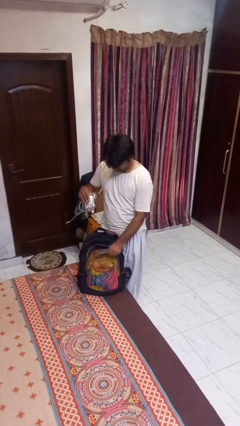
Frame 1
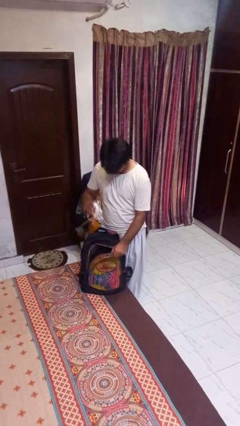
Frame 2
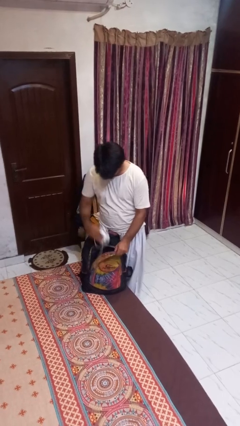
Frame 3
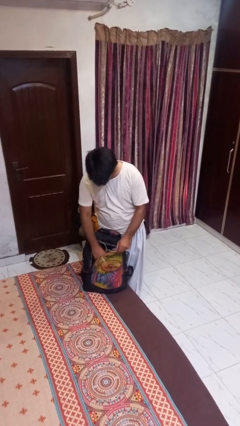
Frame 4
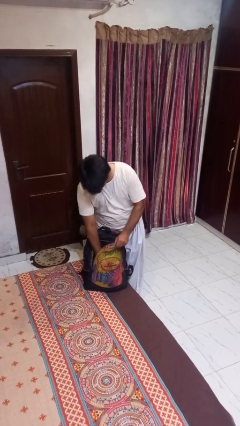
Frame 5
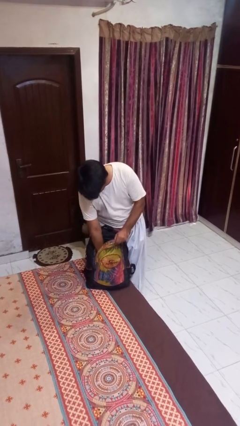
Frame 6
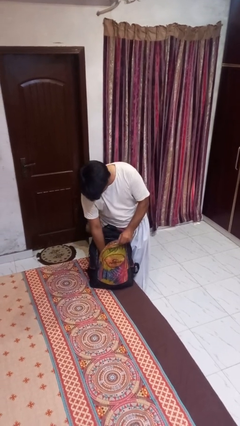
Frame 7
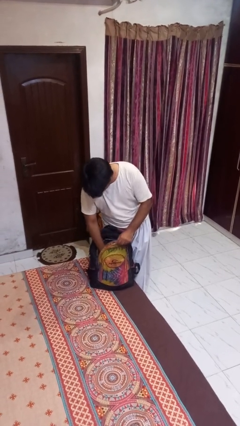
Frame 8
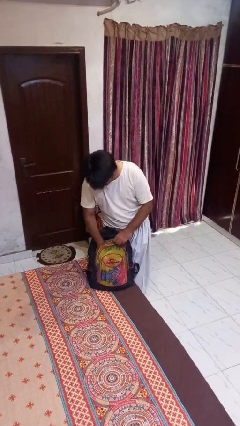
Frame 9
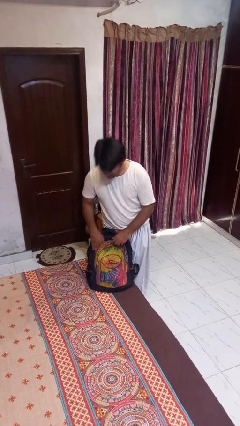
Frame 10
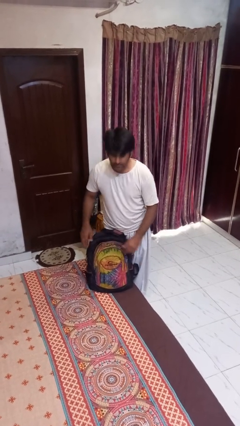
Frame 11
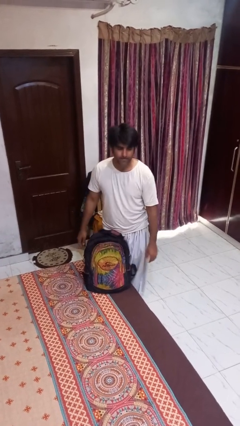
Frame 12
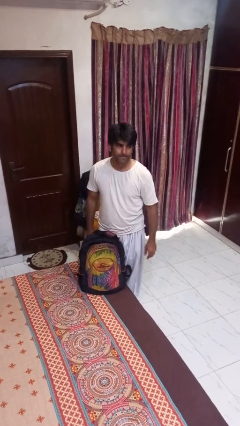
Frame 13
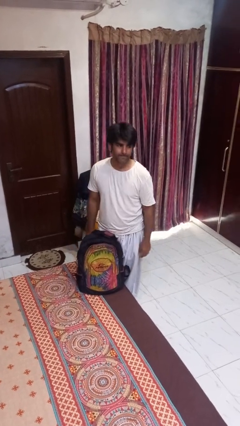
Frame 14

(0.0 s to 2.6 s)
person puts object into backpack

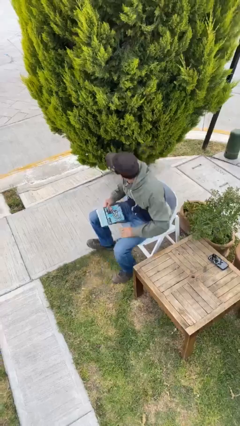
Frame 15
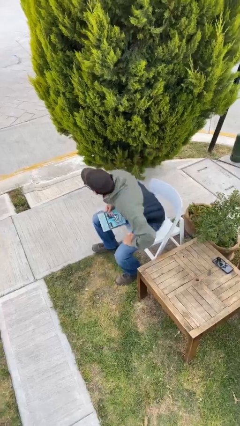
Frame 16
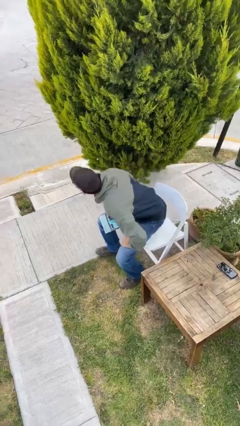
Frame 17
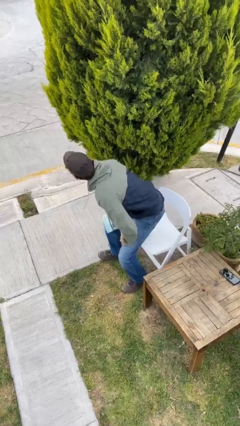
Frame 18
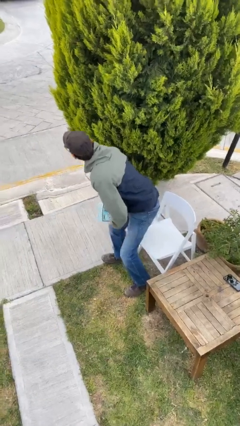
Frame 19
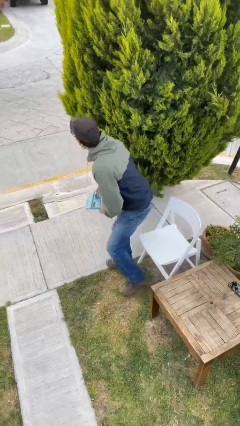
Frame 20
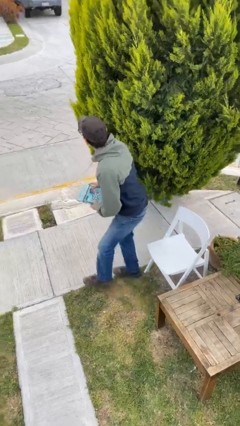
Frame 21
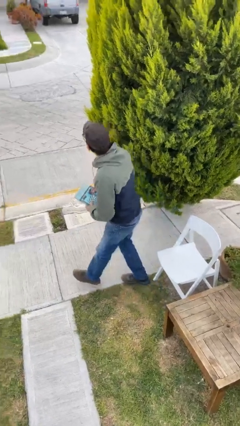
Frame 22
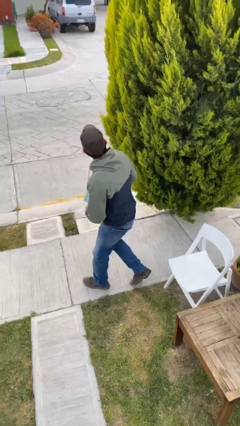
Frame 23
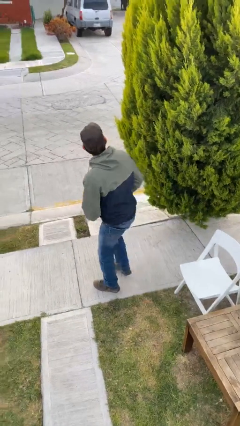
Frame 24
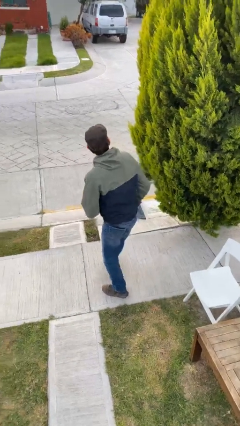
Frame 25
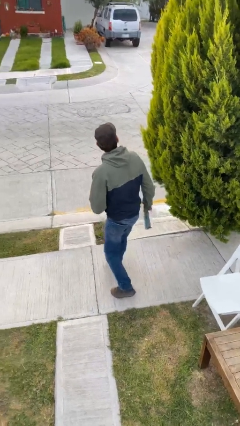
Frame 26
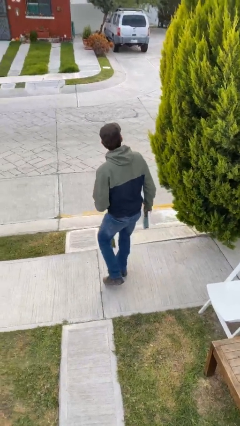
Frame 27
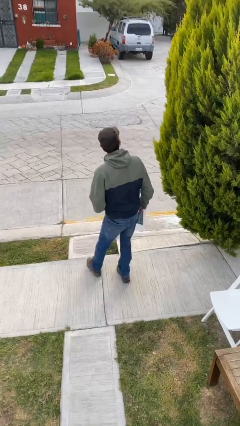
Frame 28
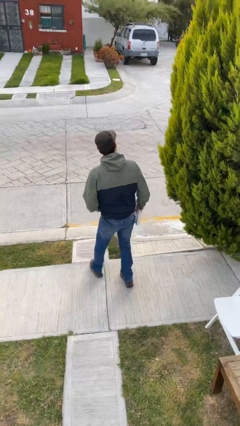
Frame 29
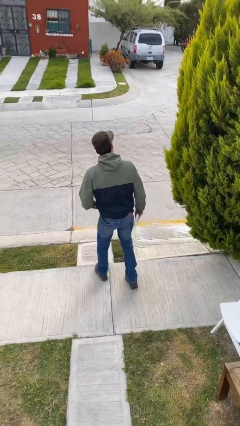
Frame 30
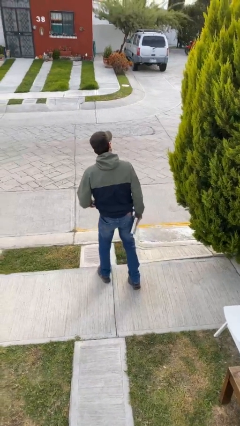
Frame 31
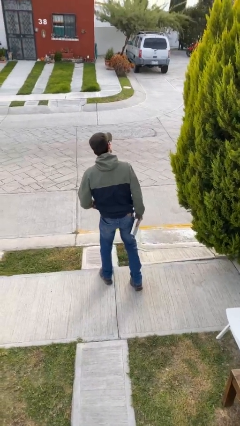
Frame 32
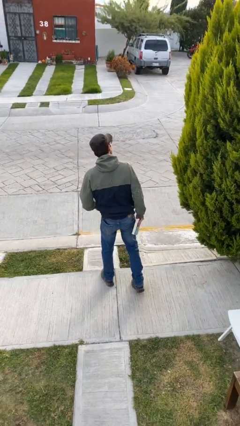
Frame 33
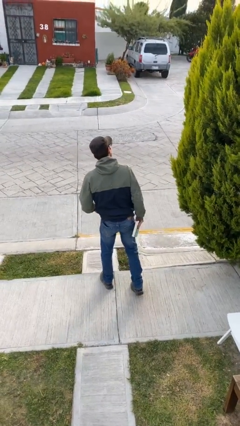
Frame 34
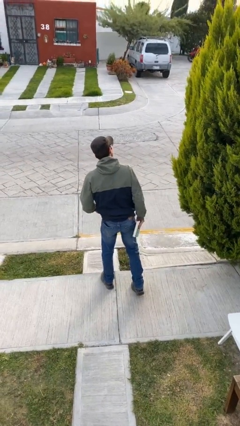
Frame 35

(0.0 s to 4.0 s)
person stands up

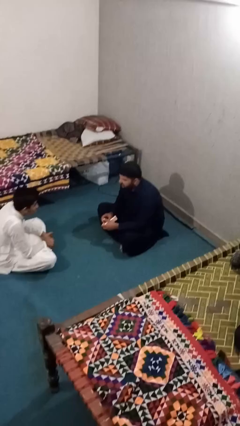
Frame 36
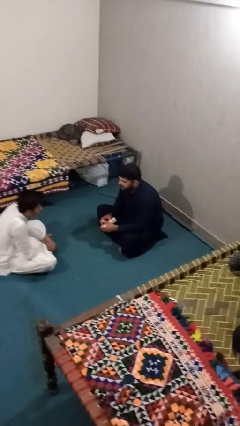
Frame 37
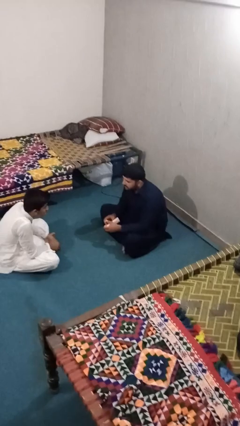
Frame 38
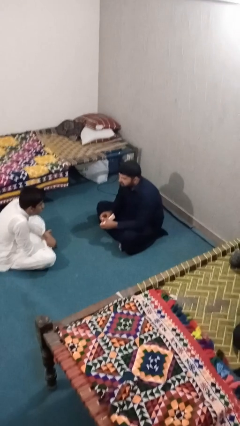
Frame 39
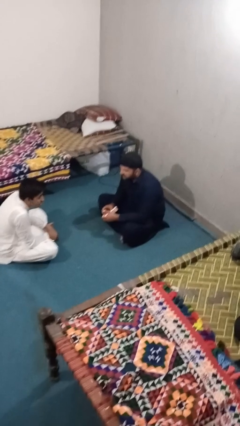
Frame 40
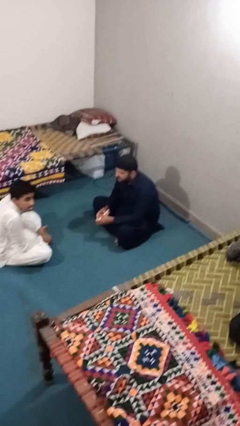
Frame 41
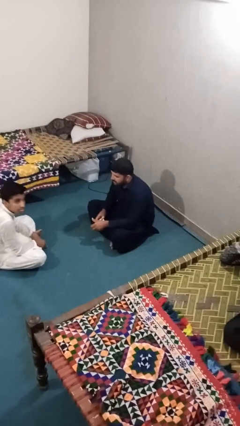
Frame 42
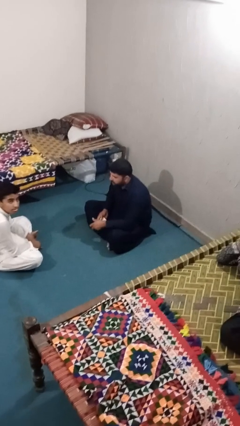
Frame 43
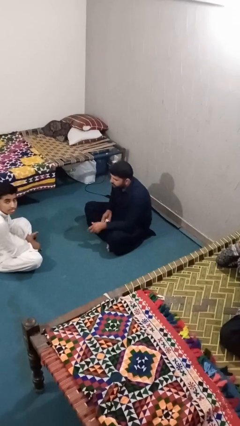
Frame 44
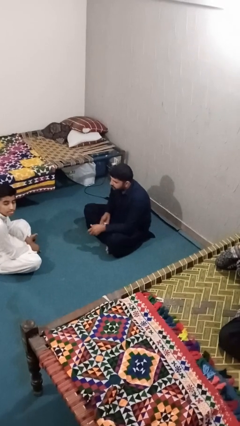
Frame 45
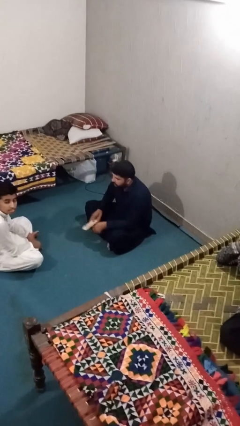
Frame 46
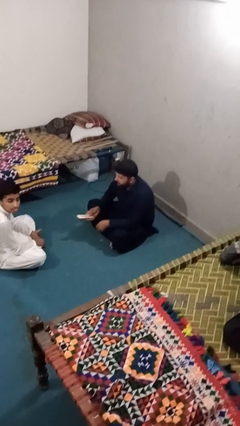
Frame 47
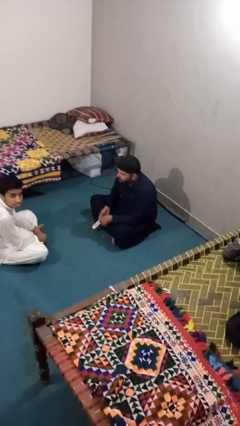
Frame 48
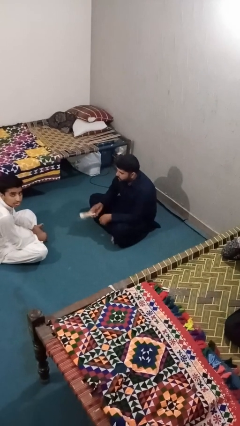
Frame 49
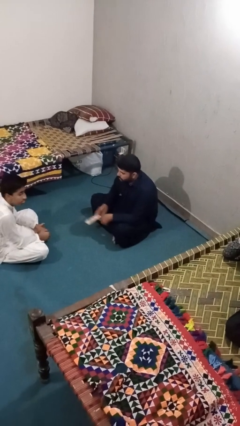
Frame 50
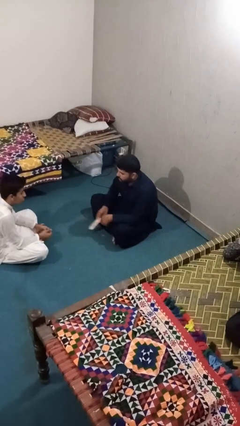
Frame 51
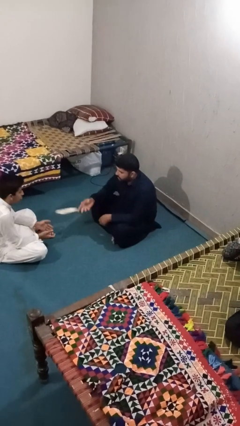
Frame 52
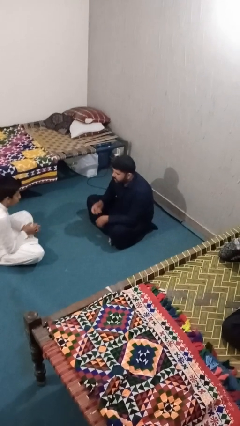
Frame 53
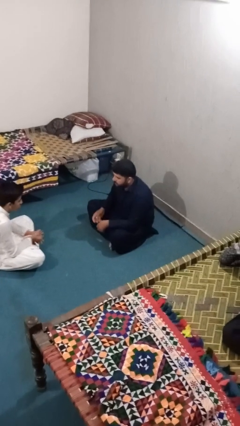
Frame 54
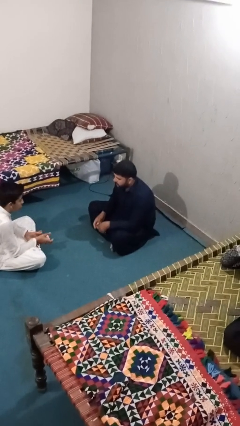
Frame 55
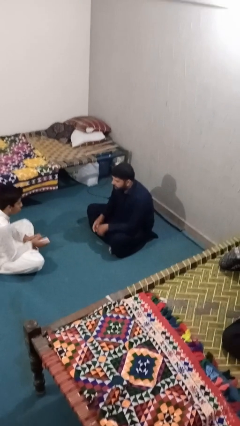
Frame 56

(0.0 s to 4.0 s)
person throws object to person

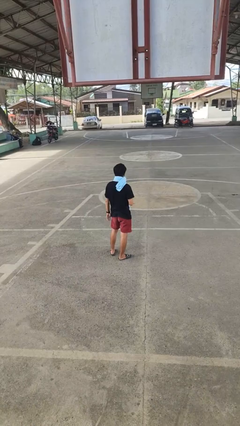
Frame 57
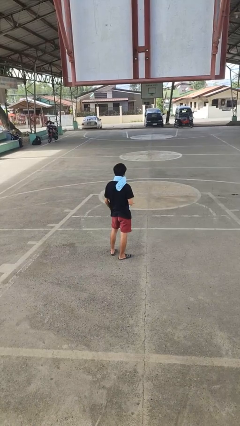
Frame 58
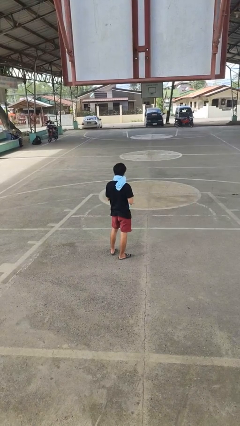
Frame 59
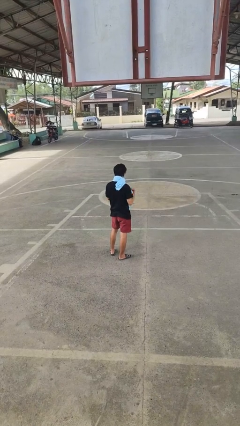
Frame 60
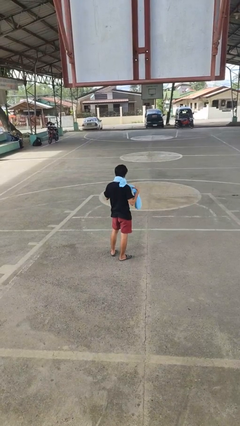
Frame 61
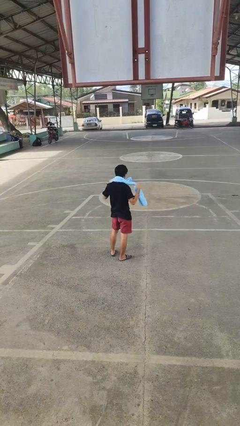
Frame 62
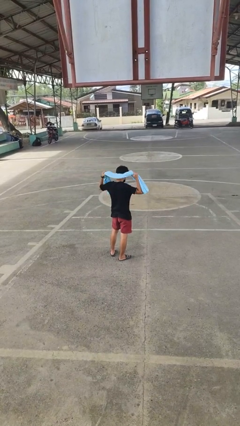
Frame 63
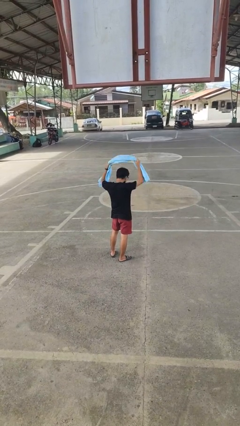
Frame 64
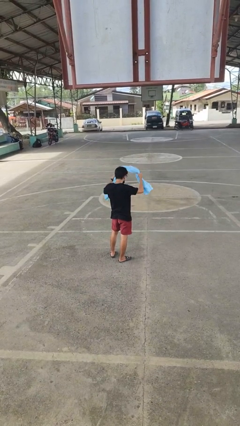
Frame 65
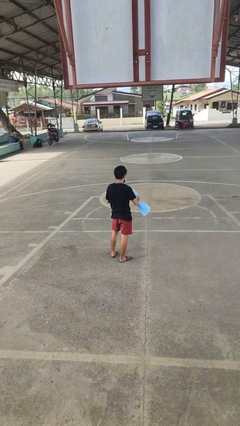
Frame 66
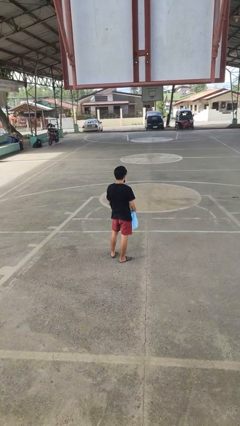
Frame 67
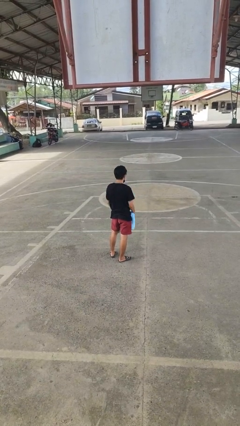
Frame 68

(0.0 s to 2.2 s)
person takes off scarf

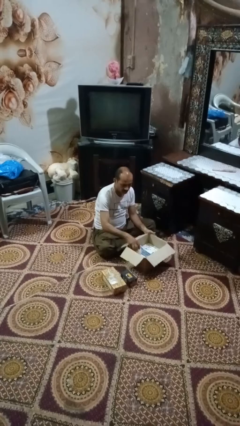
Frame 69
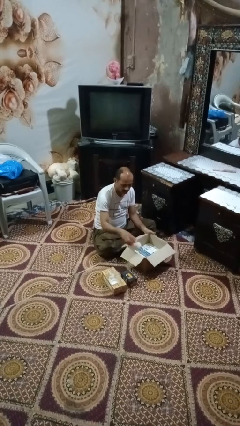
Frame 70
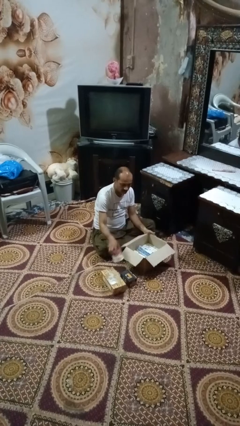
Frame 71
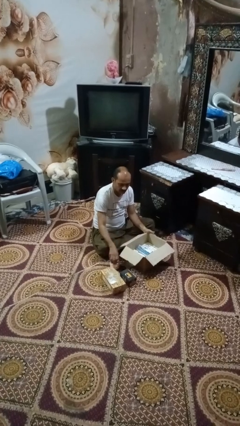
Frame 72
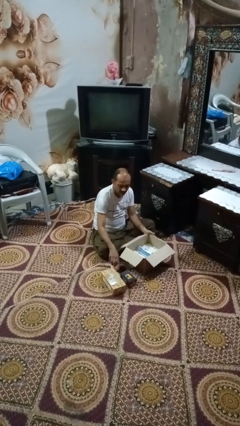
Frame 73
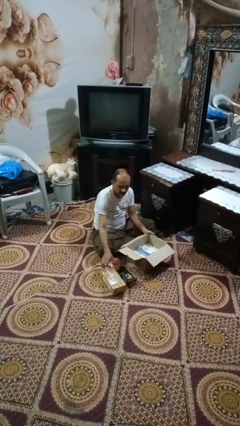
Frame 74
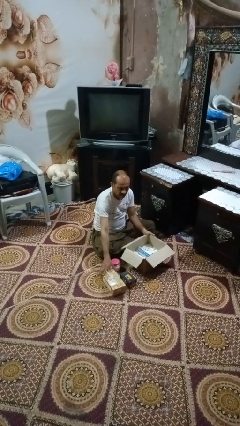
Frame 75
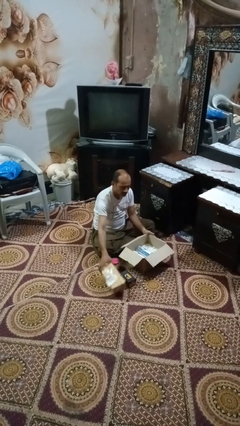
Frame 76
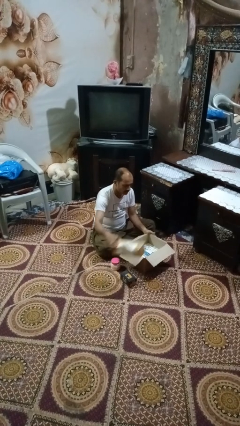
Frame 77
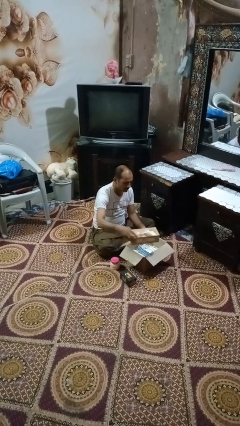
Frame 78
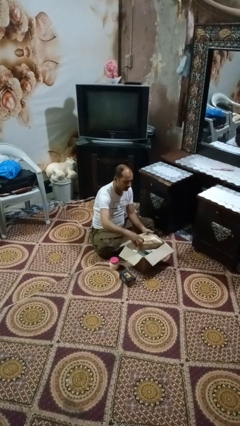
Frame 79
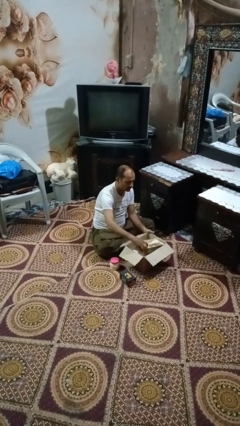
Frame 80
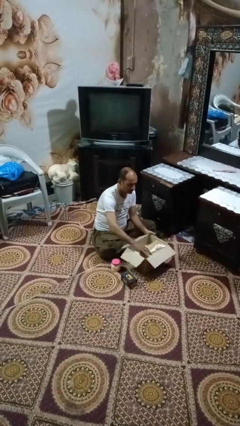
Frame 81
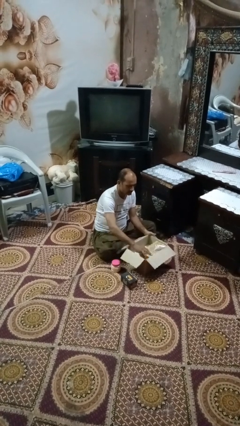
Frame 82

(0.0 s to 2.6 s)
person puts object into box

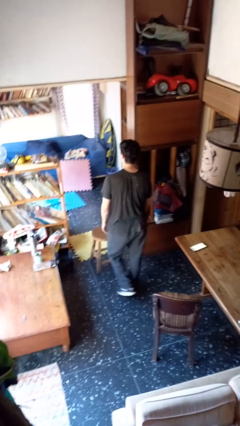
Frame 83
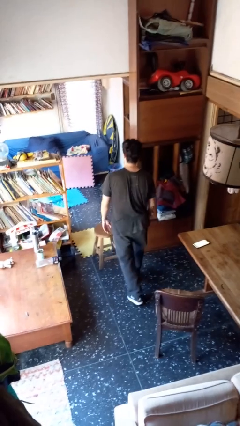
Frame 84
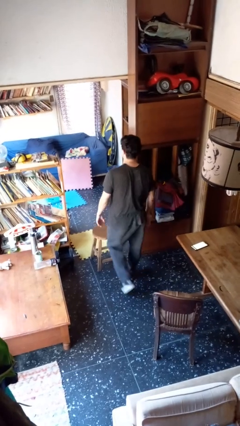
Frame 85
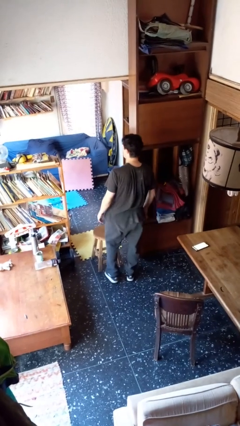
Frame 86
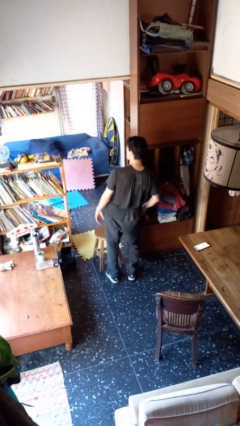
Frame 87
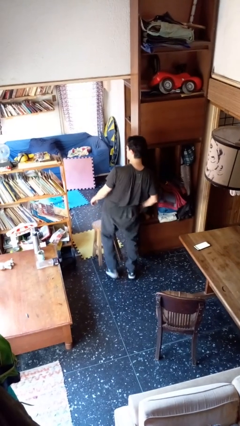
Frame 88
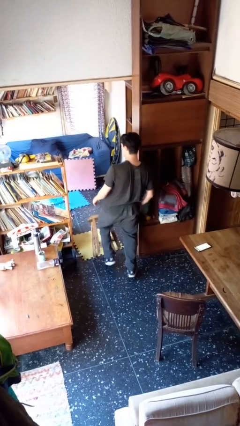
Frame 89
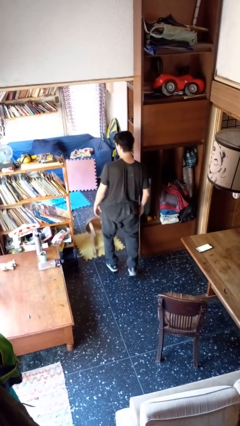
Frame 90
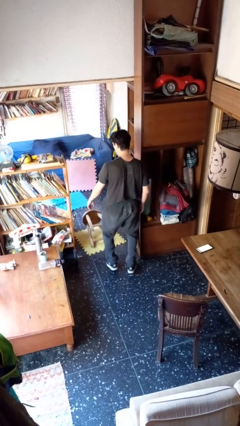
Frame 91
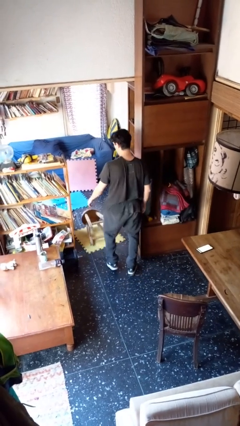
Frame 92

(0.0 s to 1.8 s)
person knocks over furniture
